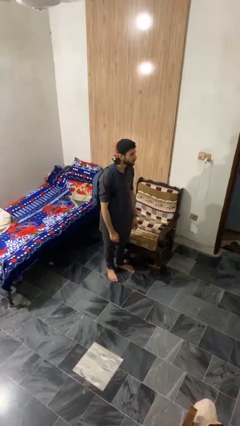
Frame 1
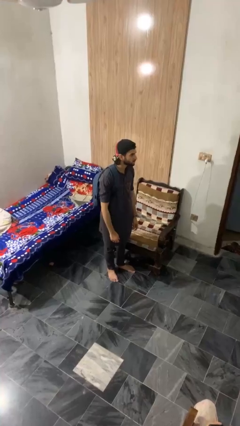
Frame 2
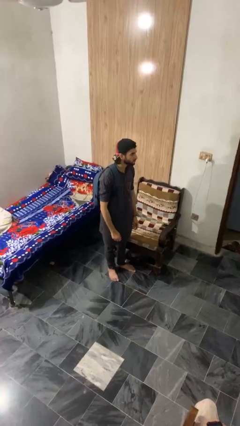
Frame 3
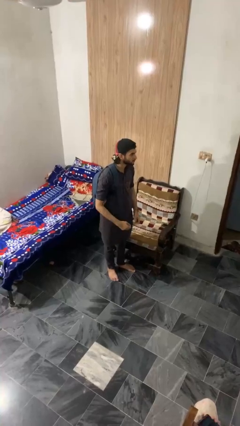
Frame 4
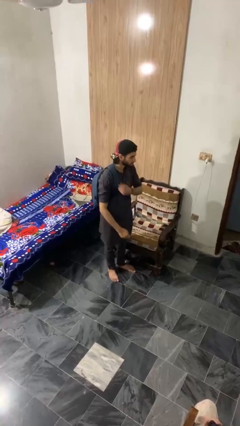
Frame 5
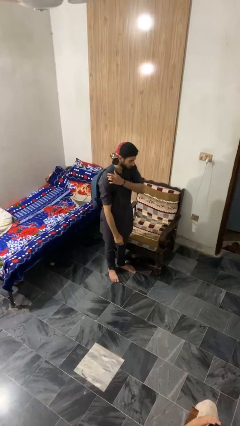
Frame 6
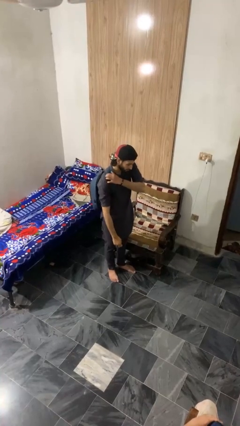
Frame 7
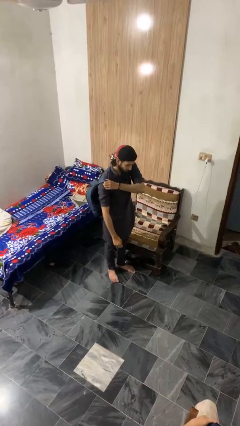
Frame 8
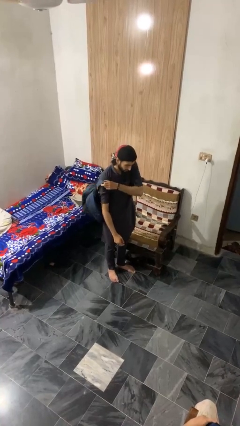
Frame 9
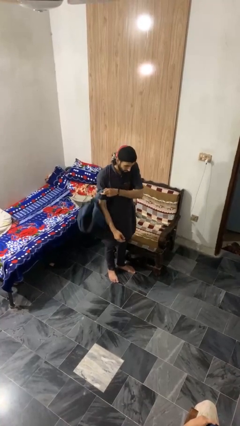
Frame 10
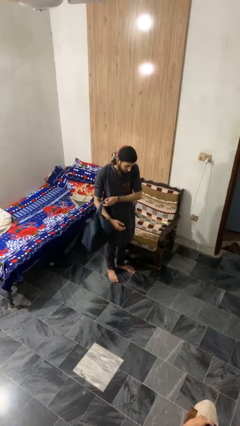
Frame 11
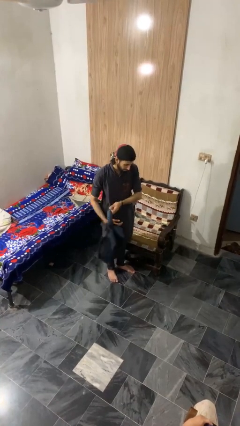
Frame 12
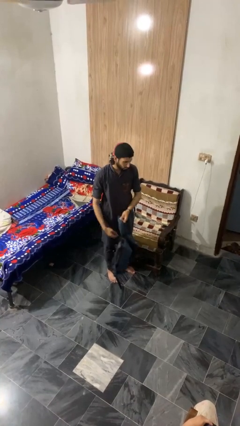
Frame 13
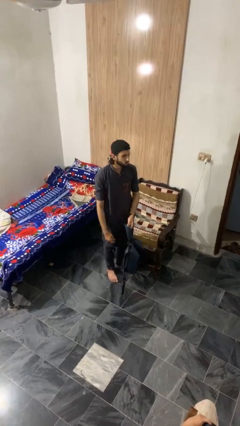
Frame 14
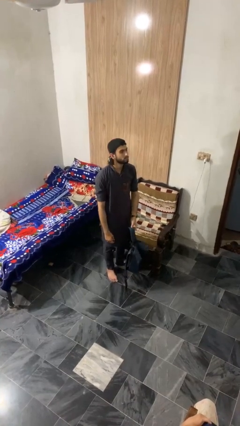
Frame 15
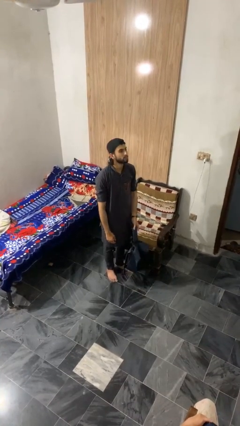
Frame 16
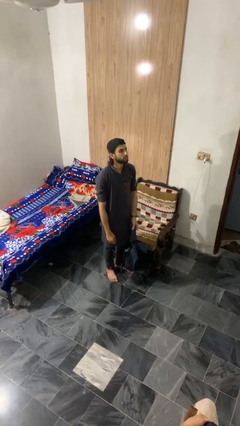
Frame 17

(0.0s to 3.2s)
person takes off backpack

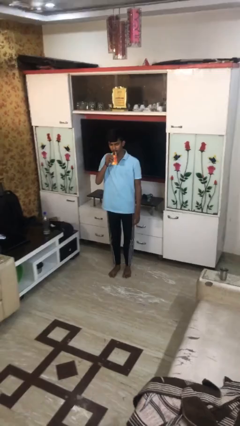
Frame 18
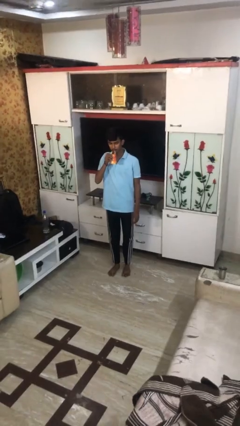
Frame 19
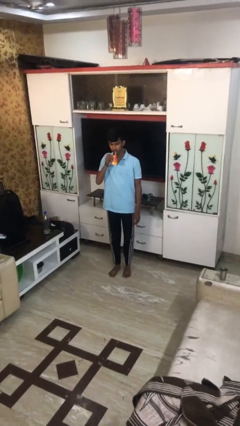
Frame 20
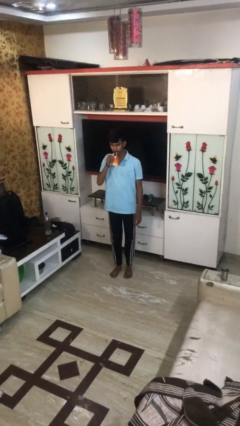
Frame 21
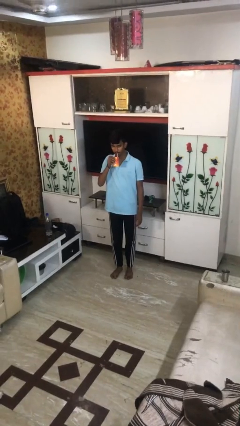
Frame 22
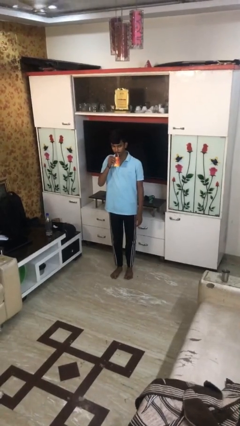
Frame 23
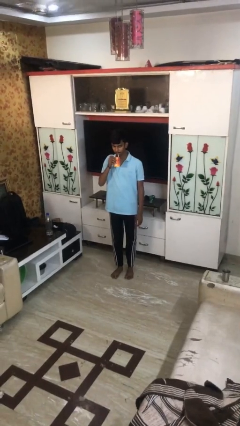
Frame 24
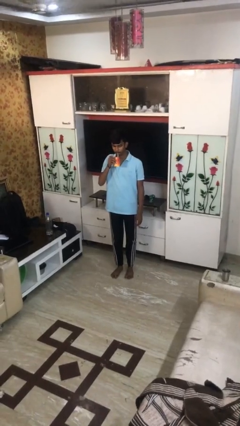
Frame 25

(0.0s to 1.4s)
person drinks from straw

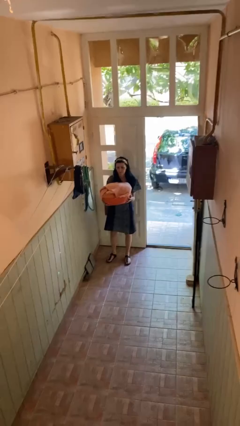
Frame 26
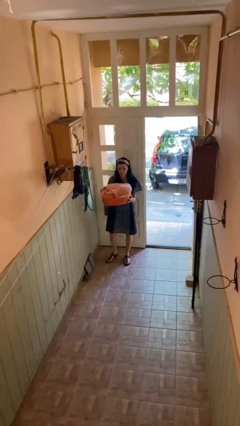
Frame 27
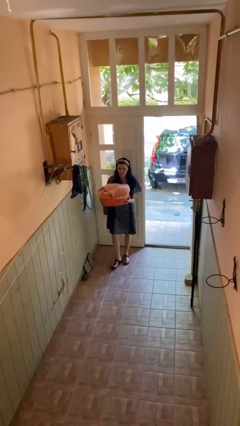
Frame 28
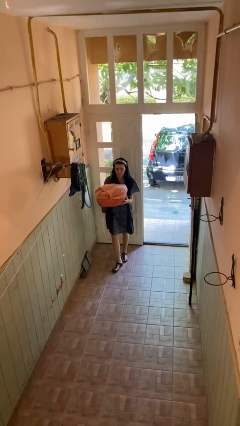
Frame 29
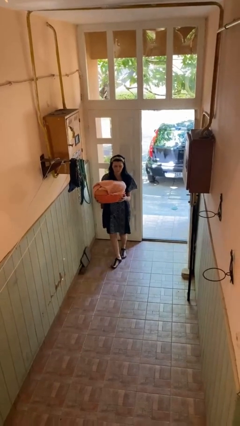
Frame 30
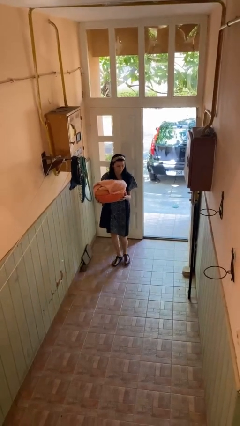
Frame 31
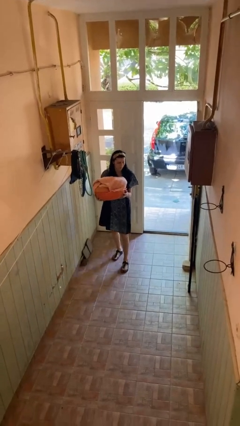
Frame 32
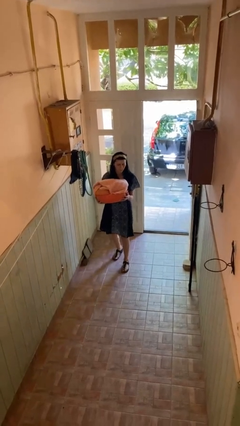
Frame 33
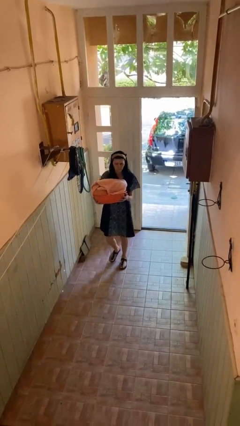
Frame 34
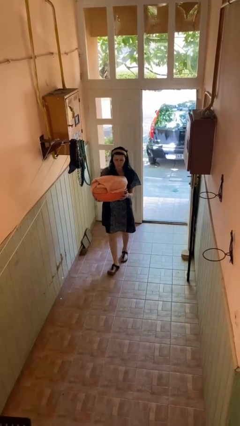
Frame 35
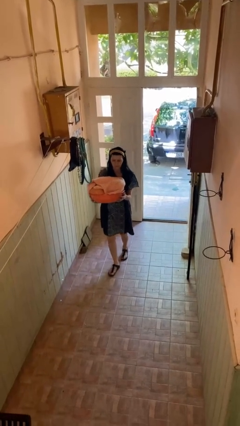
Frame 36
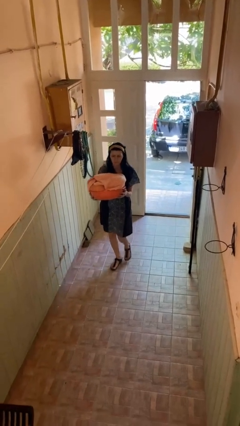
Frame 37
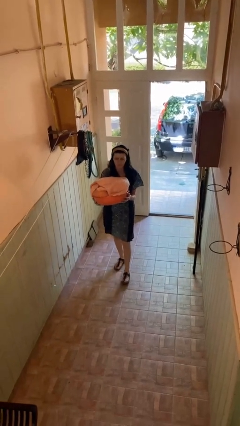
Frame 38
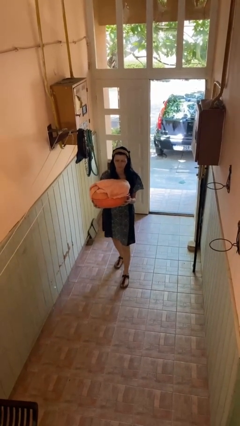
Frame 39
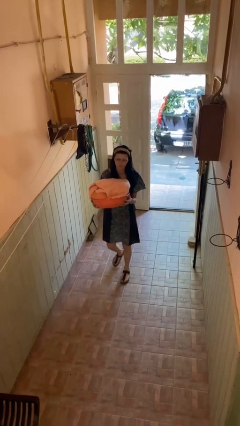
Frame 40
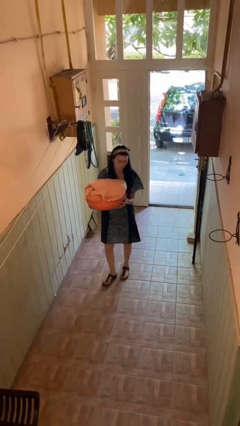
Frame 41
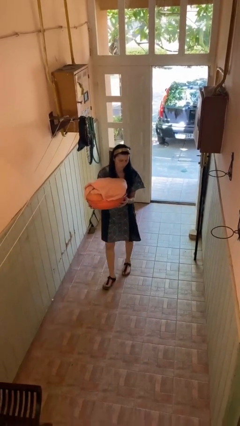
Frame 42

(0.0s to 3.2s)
person carries laundry basket

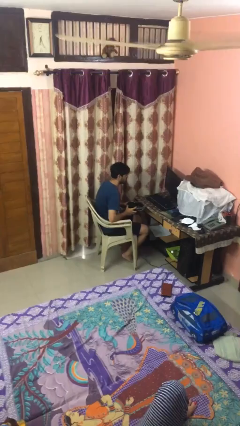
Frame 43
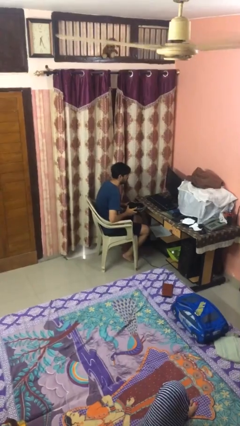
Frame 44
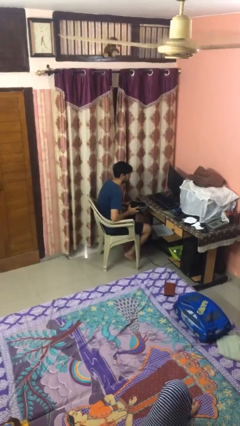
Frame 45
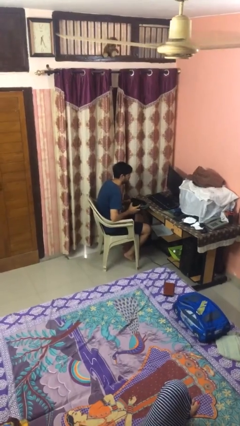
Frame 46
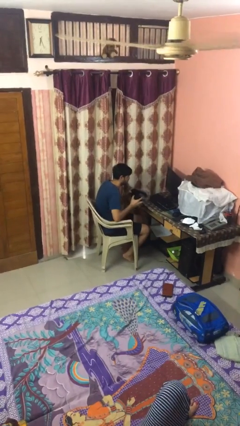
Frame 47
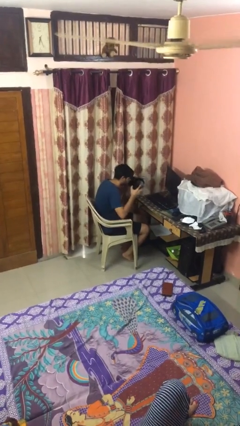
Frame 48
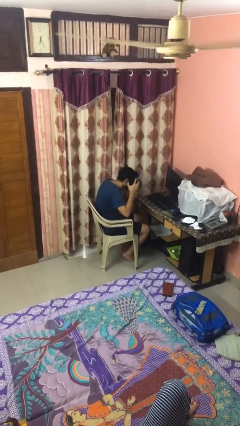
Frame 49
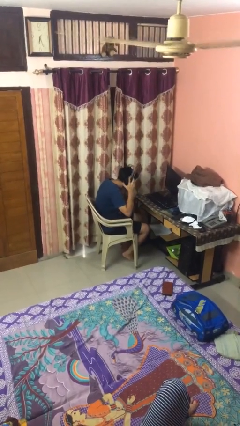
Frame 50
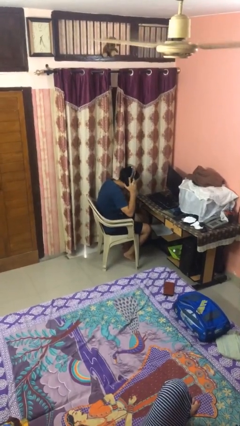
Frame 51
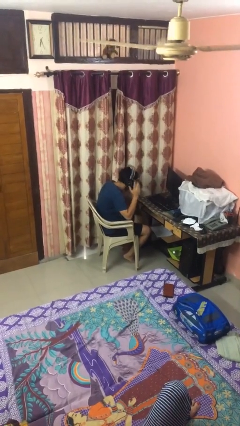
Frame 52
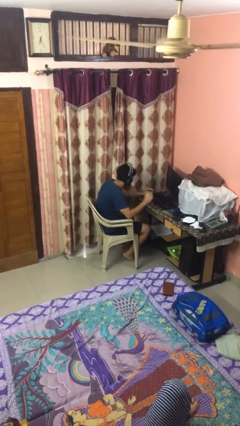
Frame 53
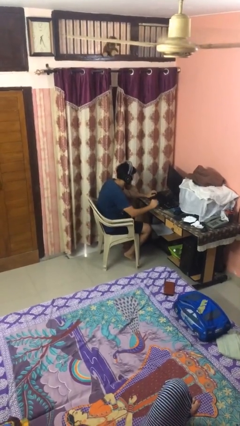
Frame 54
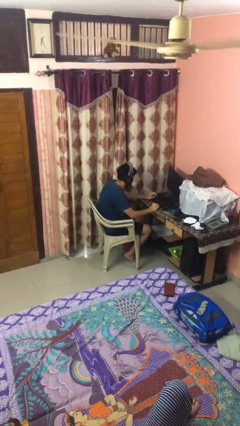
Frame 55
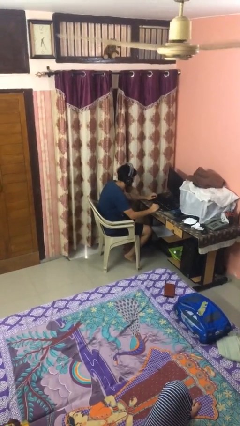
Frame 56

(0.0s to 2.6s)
person puts on headphones

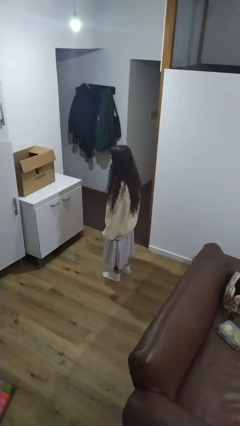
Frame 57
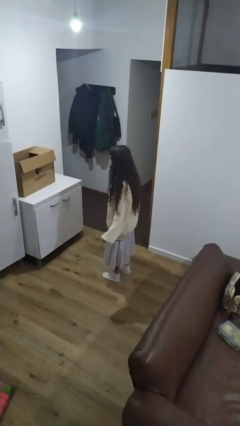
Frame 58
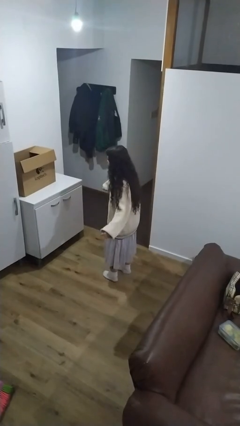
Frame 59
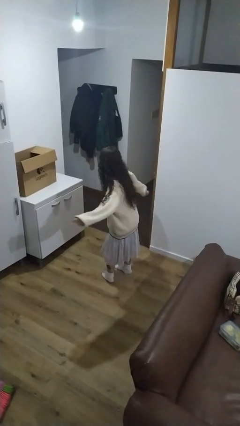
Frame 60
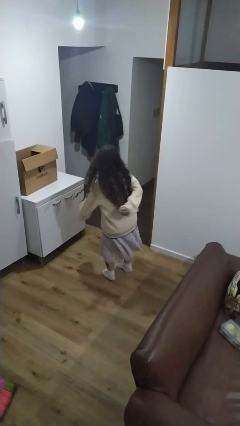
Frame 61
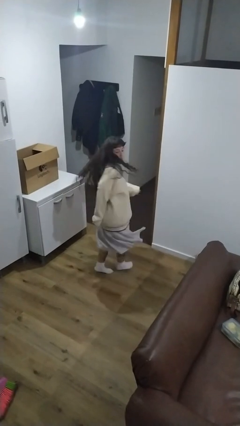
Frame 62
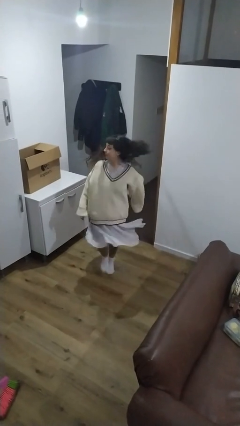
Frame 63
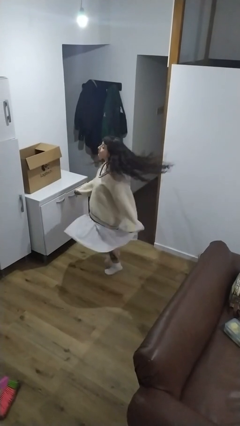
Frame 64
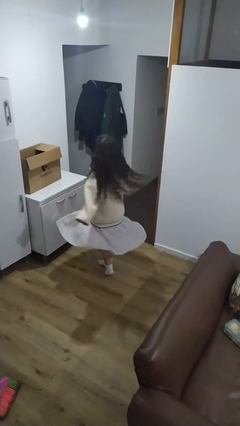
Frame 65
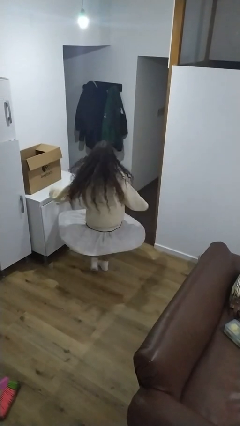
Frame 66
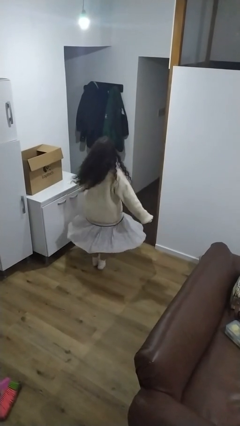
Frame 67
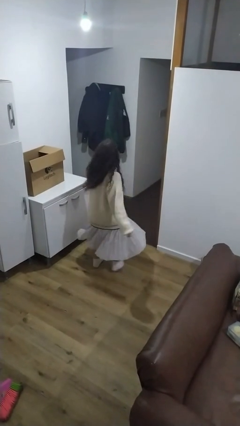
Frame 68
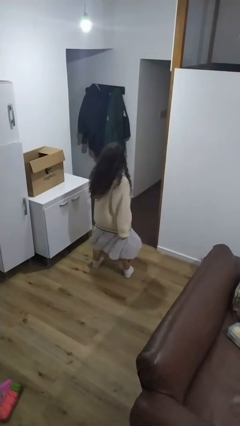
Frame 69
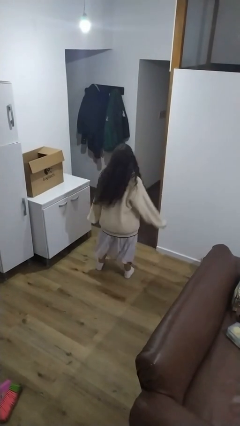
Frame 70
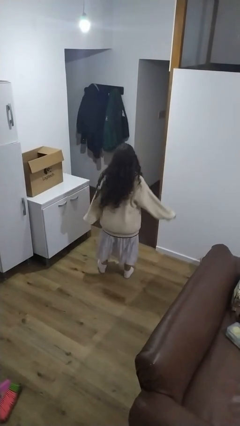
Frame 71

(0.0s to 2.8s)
person twirls

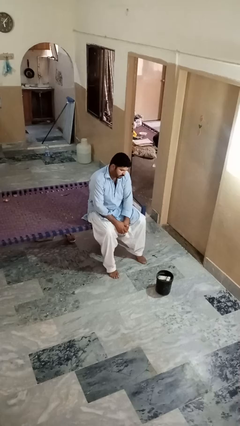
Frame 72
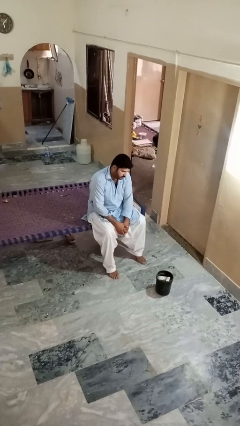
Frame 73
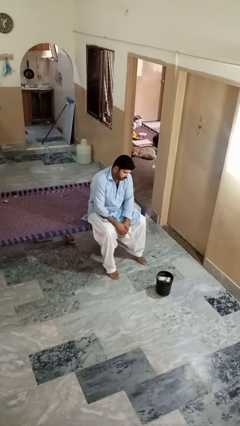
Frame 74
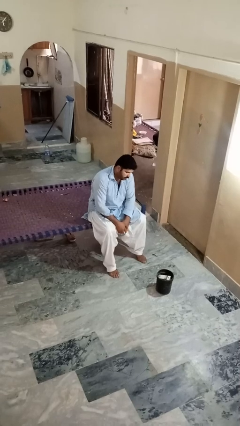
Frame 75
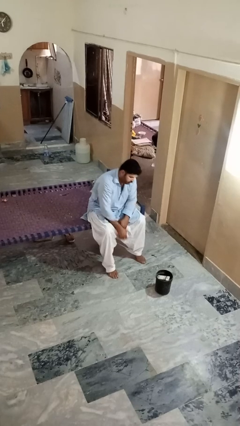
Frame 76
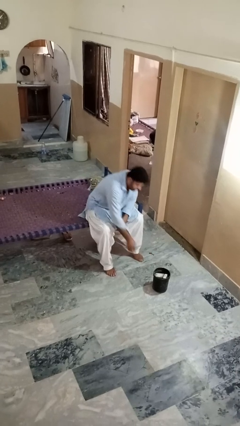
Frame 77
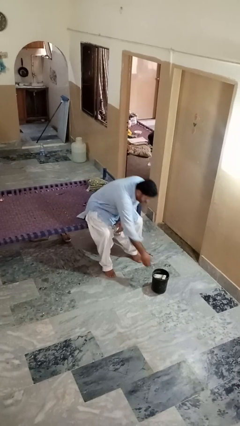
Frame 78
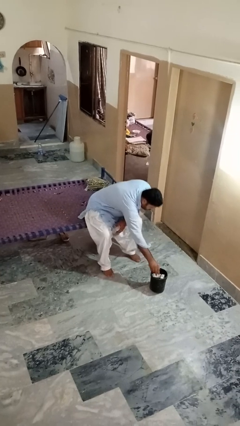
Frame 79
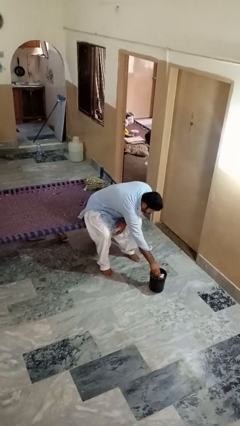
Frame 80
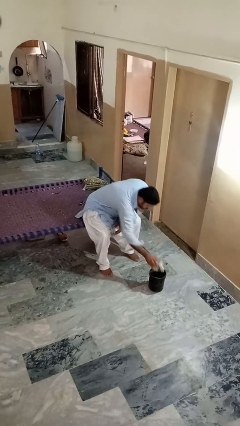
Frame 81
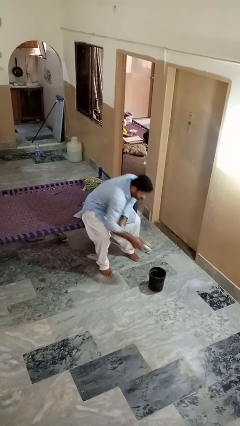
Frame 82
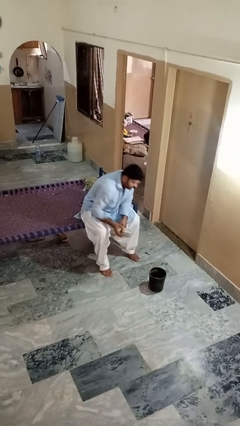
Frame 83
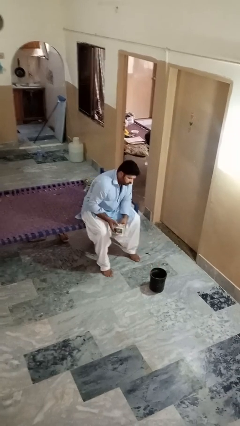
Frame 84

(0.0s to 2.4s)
person takes object from basket

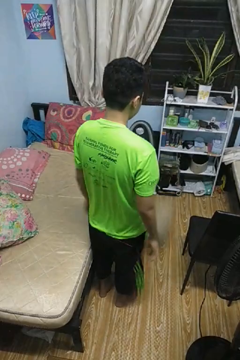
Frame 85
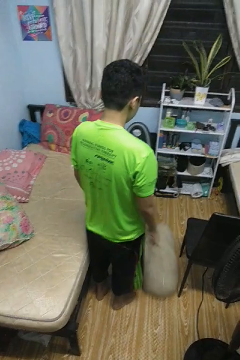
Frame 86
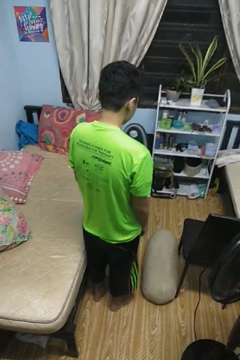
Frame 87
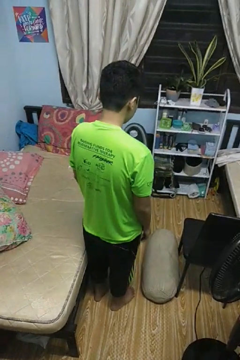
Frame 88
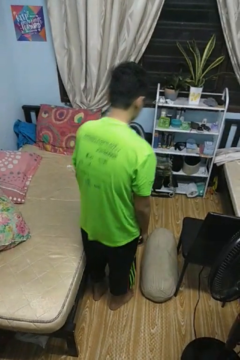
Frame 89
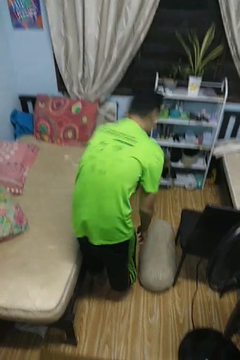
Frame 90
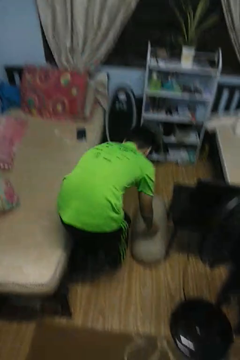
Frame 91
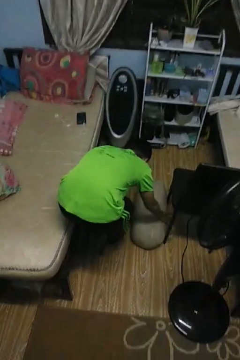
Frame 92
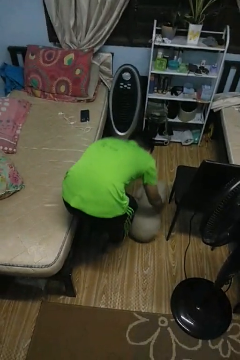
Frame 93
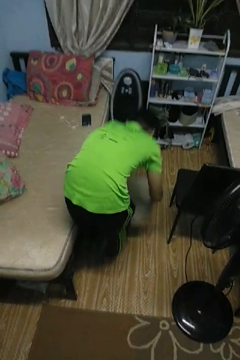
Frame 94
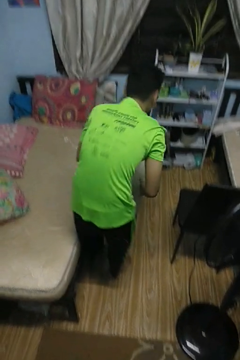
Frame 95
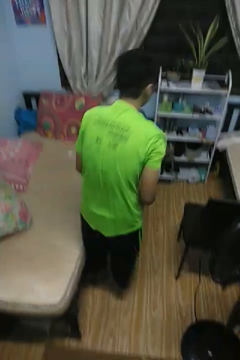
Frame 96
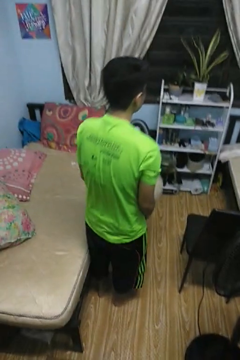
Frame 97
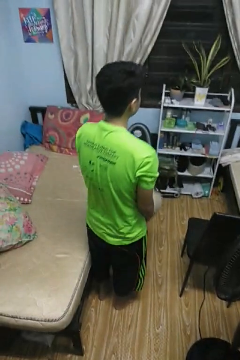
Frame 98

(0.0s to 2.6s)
person picks up object from floor
